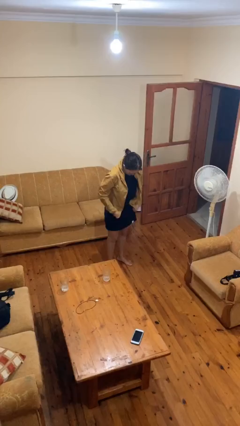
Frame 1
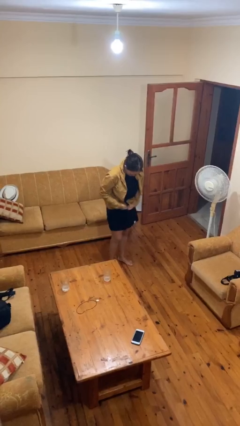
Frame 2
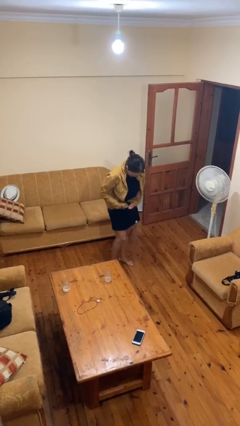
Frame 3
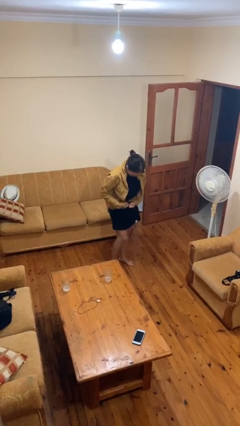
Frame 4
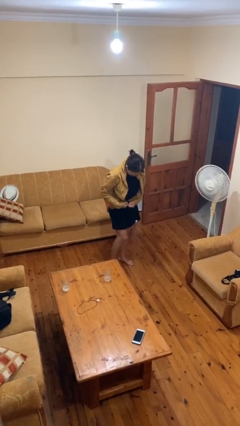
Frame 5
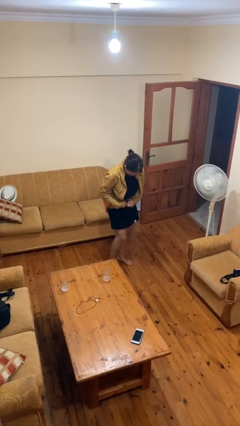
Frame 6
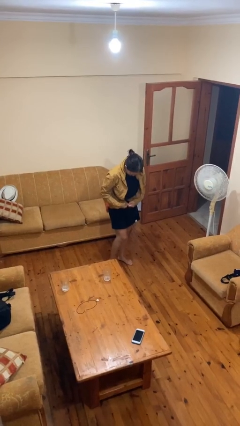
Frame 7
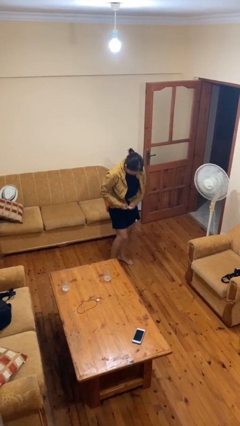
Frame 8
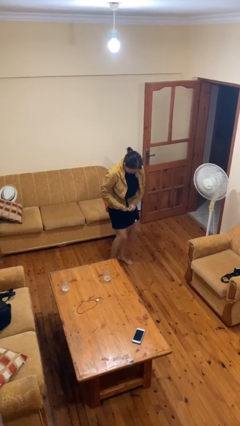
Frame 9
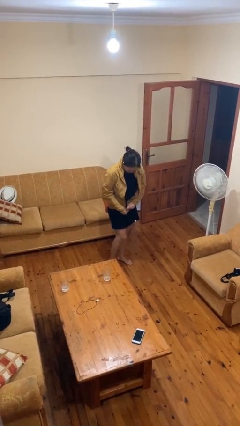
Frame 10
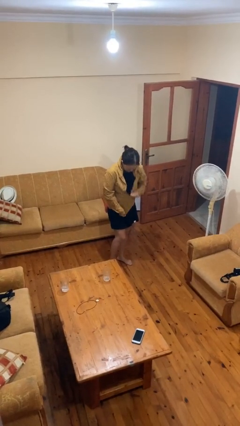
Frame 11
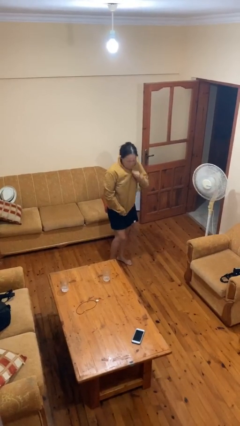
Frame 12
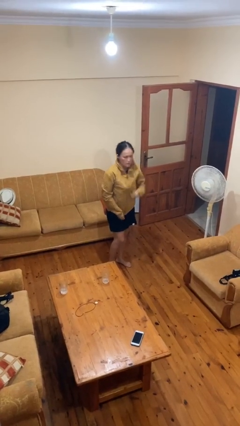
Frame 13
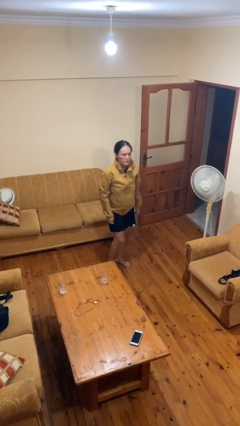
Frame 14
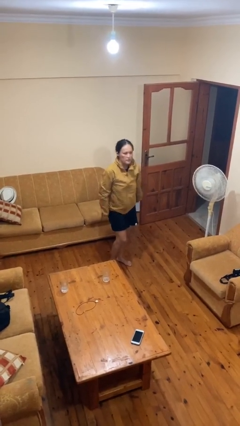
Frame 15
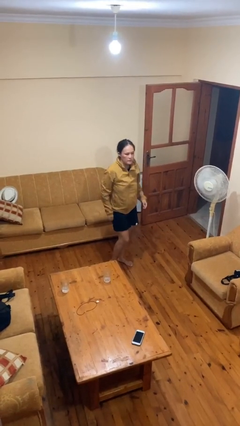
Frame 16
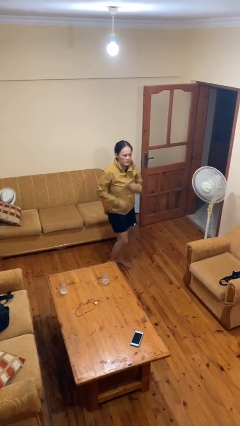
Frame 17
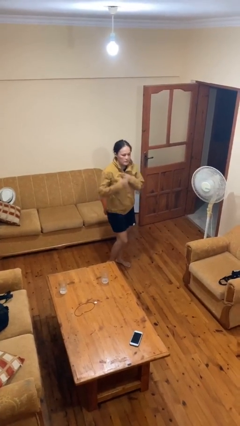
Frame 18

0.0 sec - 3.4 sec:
person zips up jacket

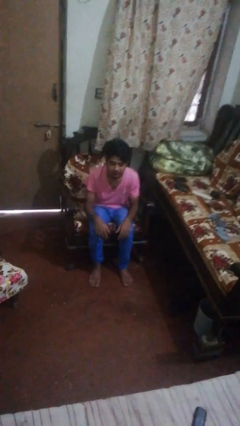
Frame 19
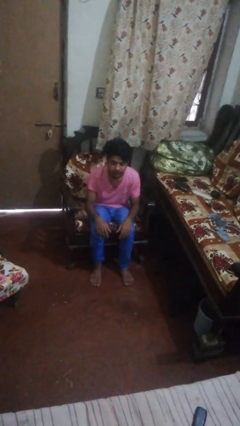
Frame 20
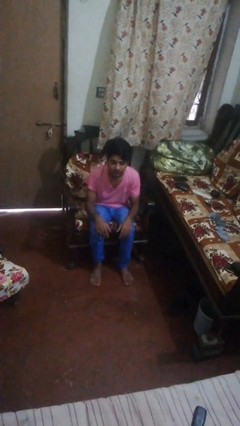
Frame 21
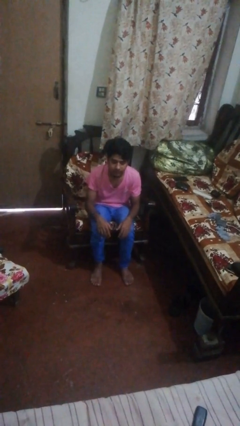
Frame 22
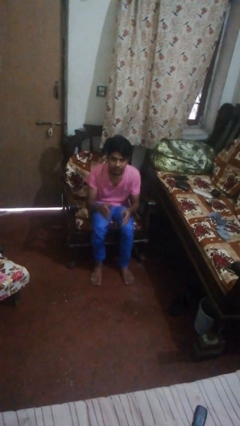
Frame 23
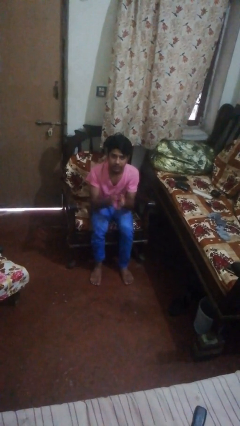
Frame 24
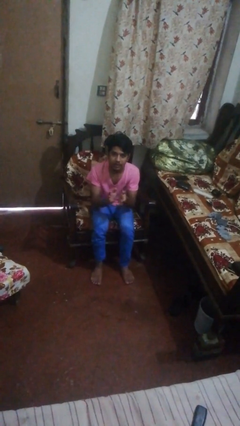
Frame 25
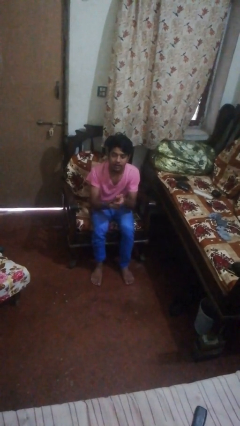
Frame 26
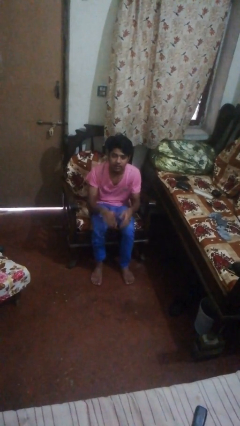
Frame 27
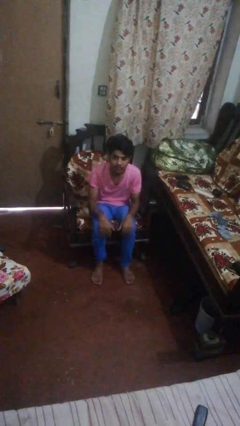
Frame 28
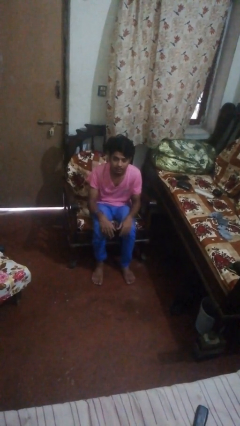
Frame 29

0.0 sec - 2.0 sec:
person claps hands

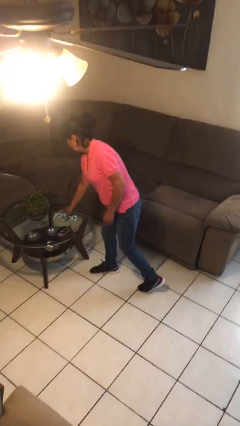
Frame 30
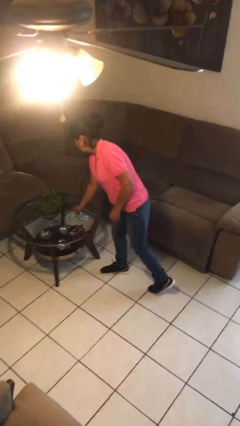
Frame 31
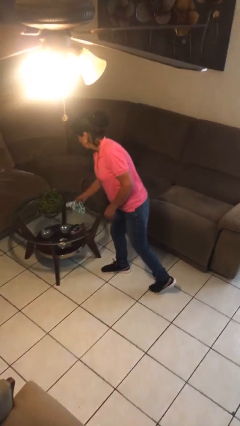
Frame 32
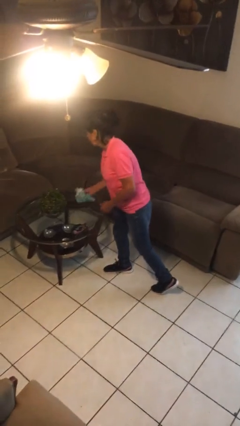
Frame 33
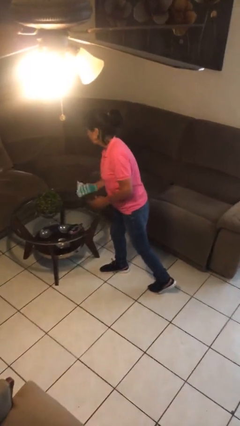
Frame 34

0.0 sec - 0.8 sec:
person picks up object from table

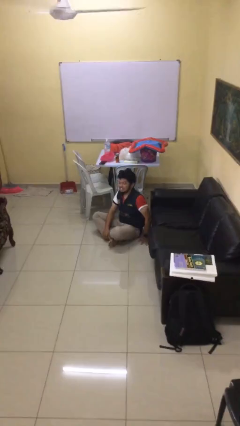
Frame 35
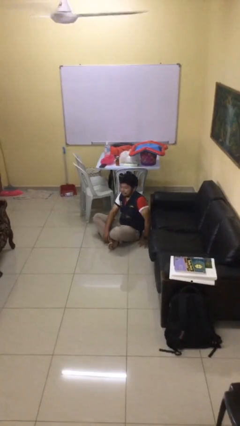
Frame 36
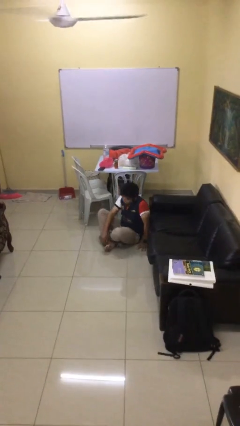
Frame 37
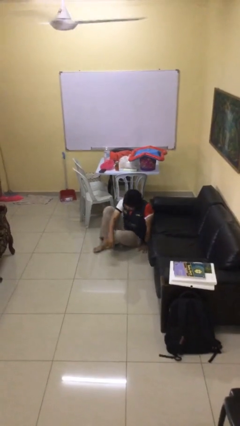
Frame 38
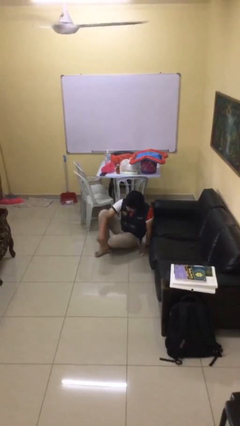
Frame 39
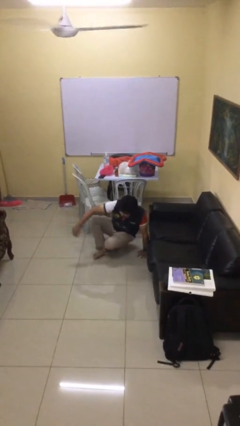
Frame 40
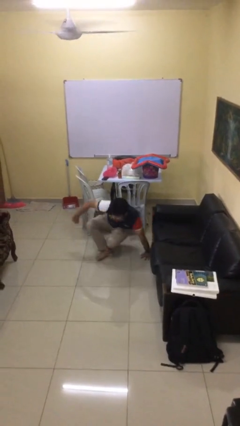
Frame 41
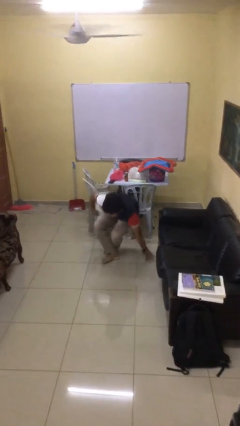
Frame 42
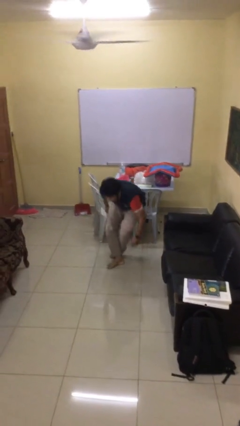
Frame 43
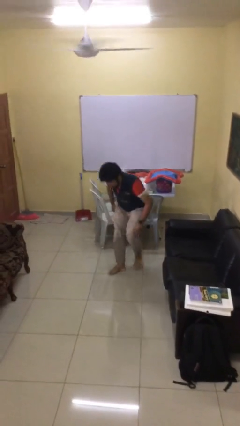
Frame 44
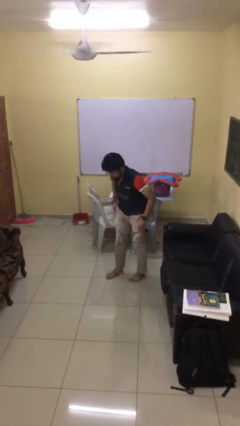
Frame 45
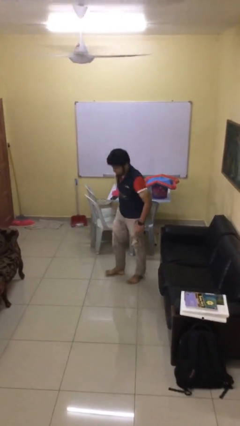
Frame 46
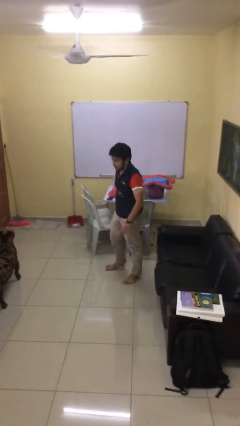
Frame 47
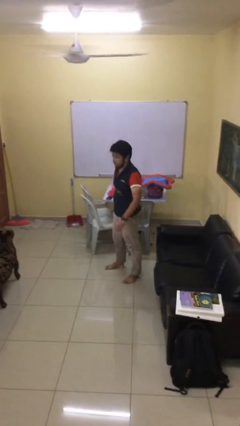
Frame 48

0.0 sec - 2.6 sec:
person stands up from floor

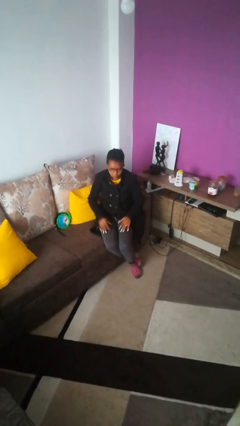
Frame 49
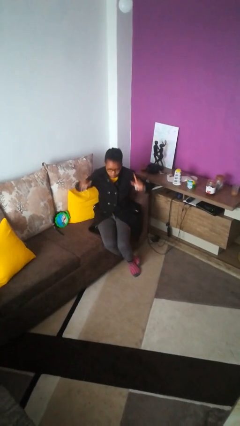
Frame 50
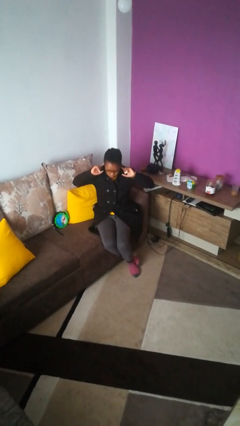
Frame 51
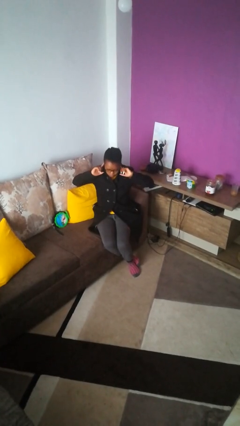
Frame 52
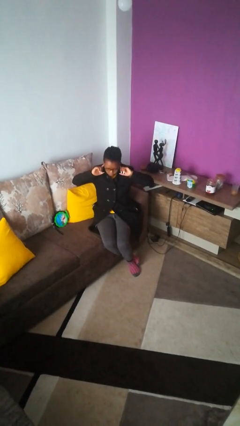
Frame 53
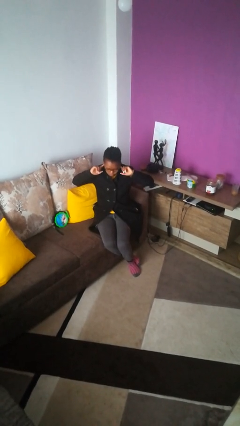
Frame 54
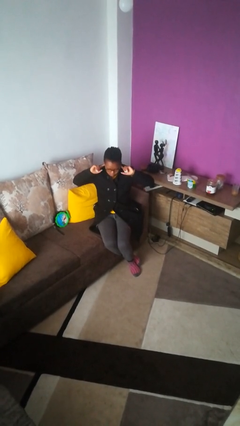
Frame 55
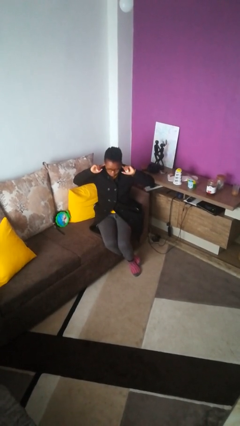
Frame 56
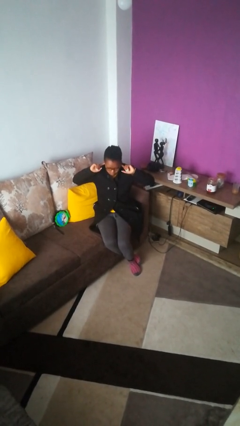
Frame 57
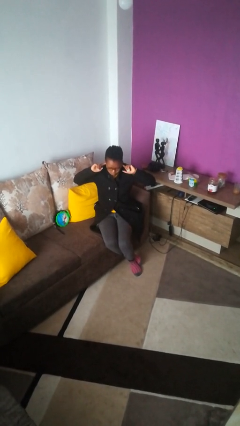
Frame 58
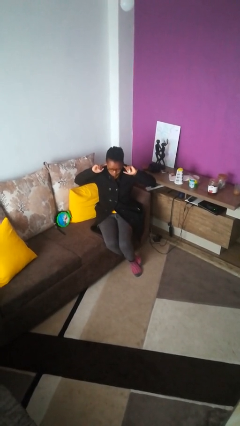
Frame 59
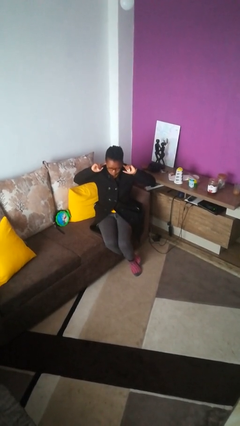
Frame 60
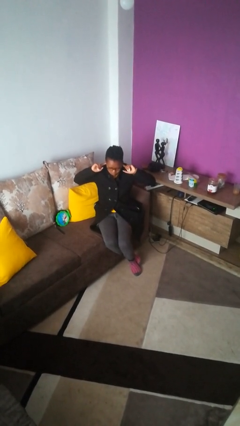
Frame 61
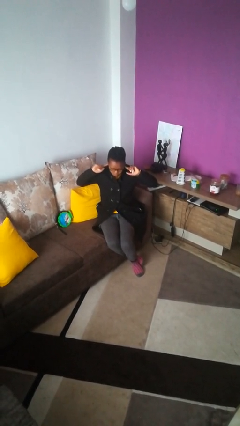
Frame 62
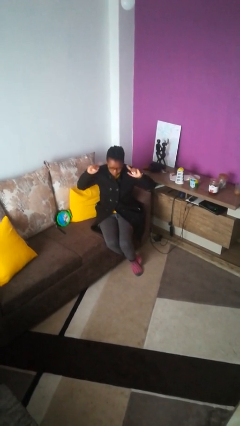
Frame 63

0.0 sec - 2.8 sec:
person puts fingers in ear

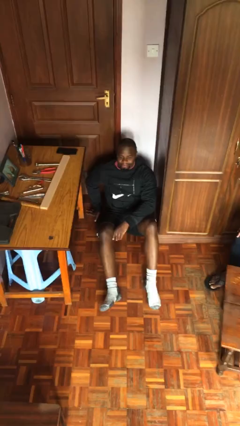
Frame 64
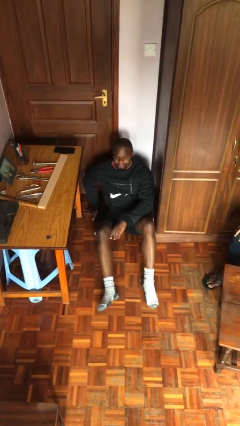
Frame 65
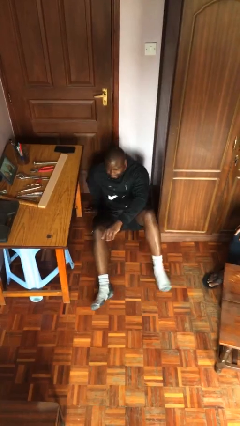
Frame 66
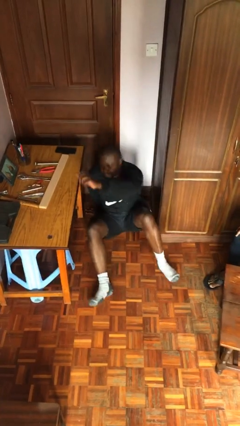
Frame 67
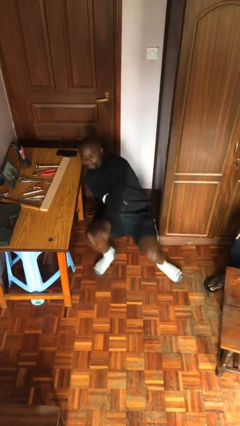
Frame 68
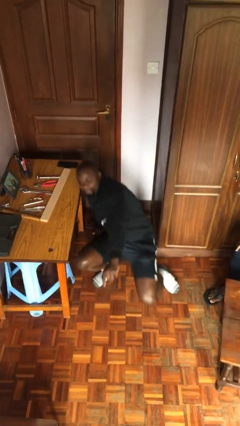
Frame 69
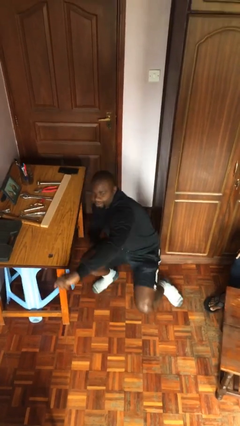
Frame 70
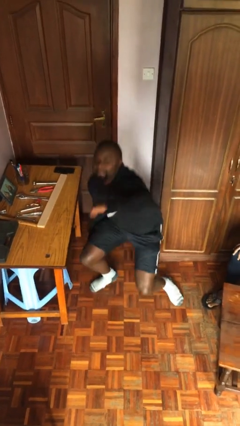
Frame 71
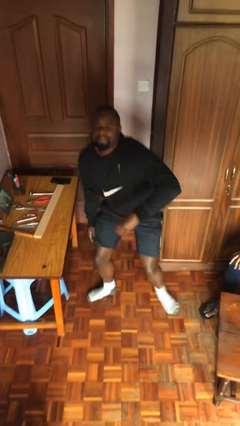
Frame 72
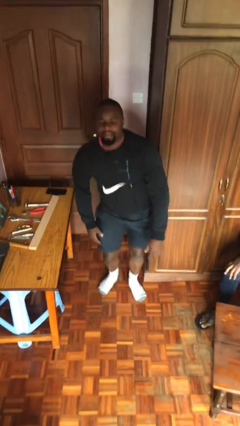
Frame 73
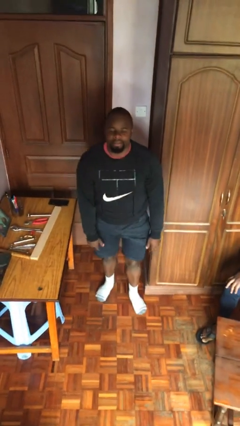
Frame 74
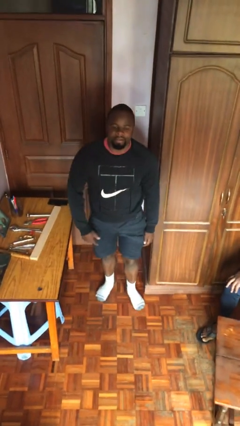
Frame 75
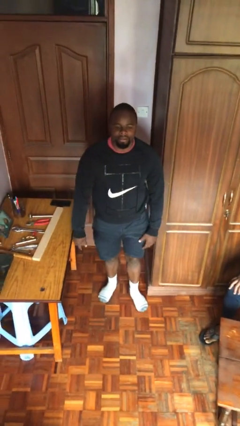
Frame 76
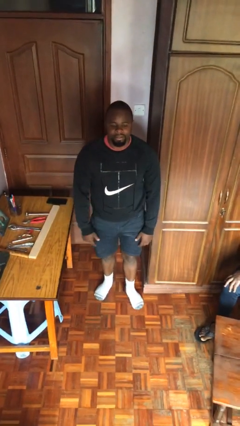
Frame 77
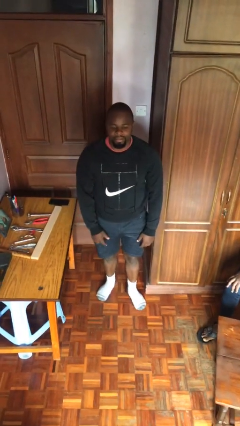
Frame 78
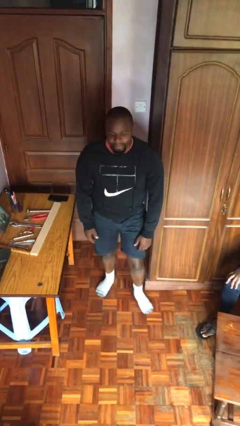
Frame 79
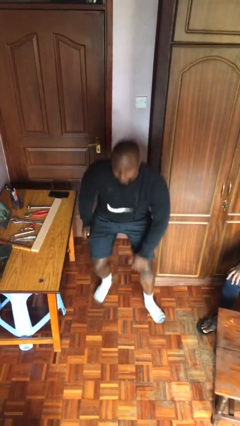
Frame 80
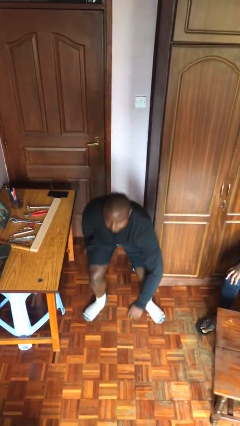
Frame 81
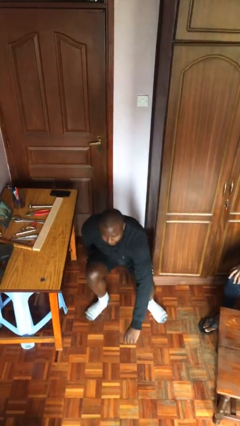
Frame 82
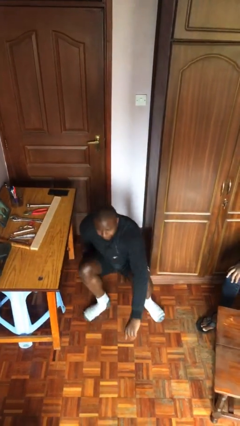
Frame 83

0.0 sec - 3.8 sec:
person stands up

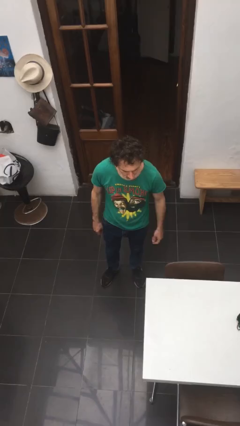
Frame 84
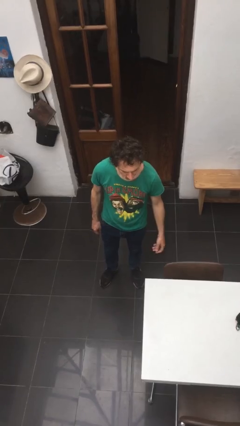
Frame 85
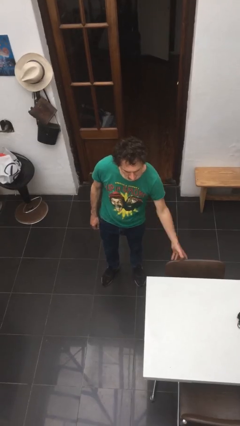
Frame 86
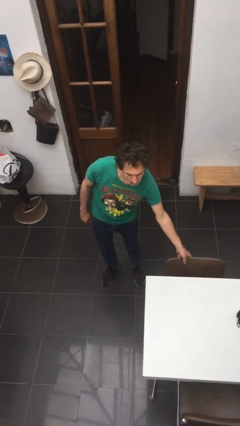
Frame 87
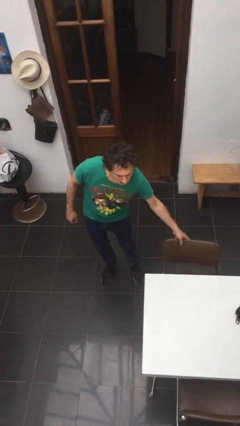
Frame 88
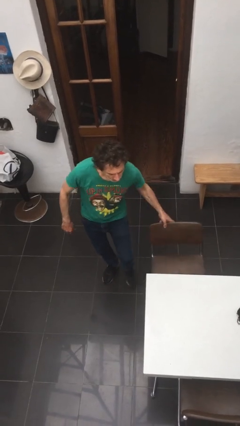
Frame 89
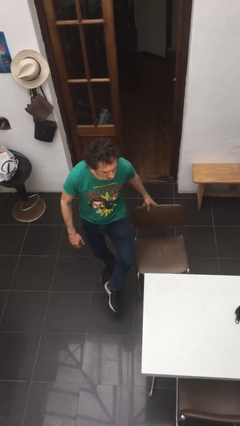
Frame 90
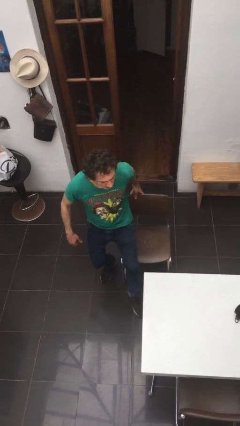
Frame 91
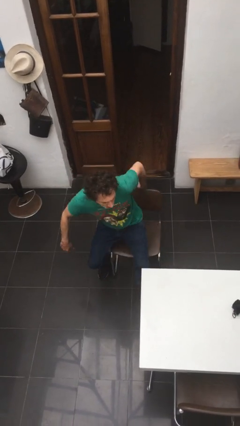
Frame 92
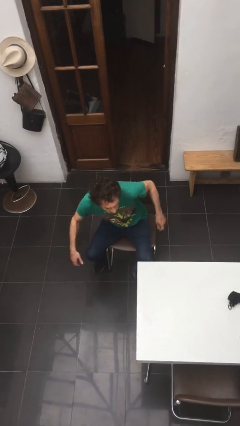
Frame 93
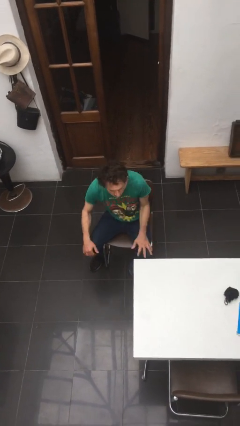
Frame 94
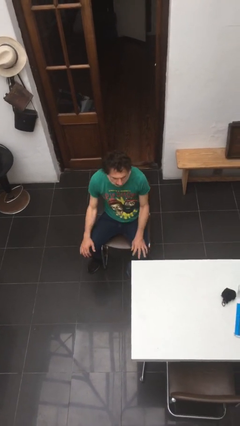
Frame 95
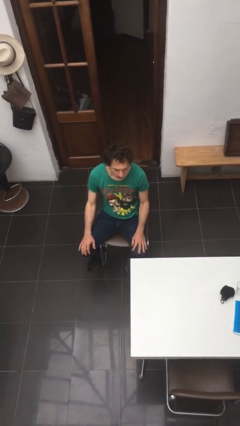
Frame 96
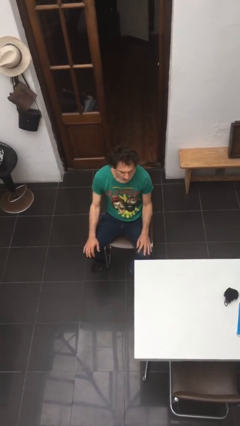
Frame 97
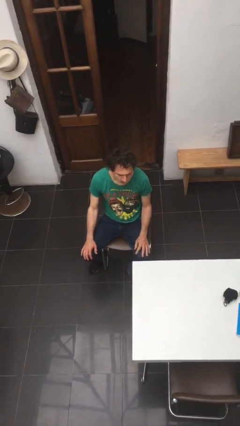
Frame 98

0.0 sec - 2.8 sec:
person sits down
